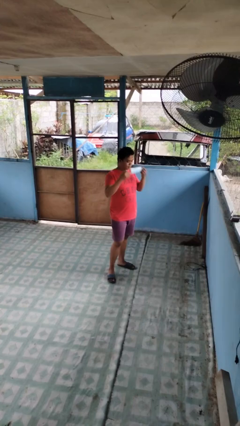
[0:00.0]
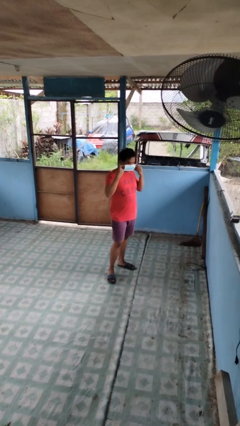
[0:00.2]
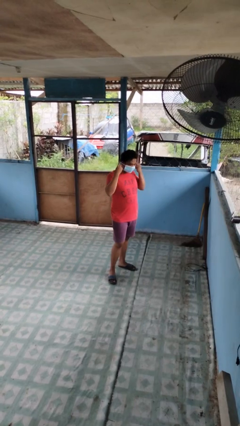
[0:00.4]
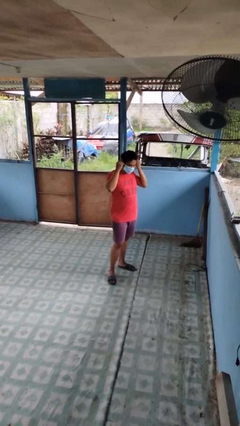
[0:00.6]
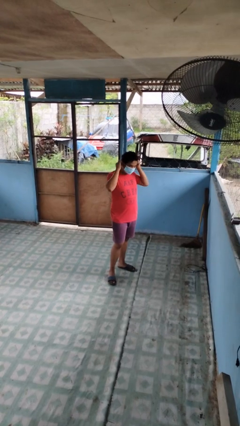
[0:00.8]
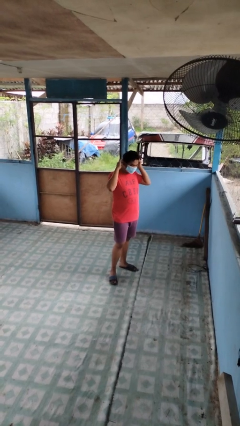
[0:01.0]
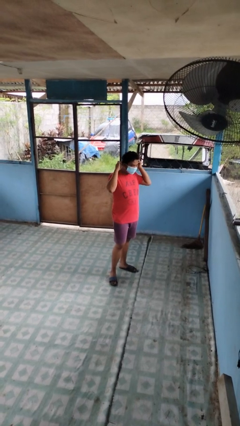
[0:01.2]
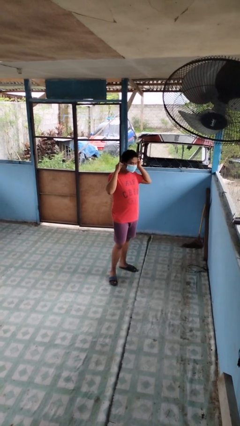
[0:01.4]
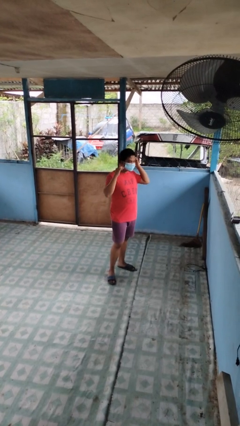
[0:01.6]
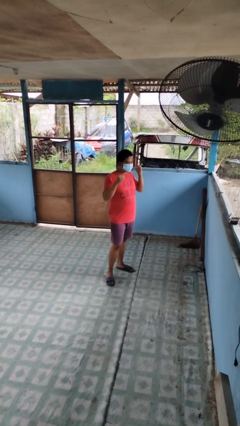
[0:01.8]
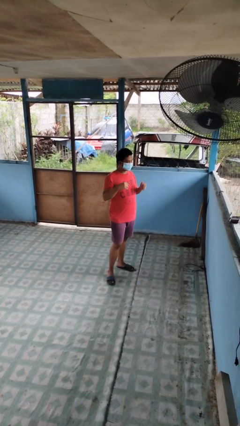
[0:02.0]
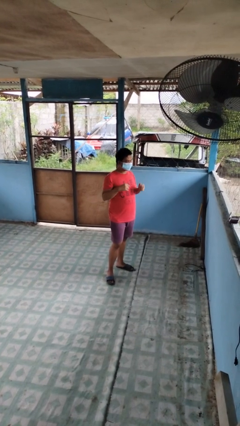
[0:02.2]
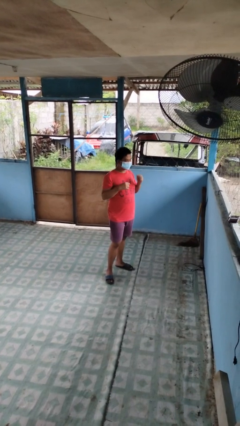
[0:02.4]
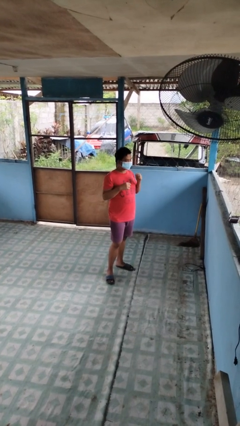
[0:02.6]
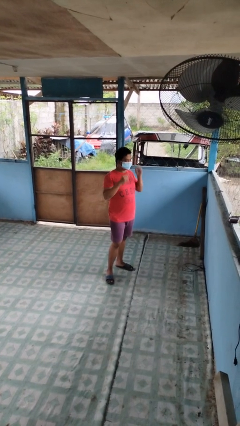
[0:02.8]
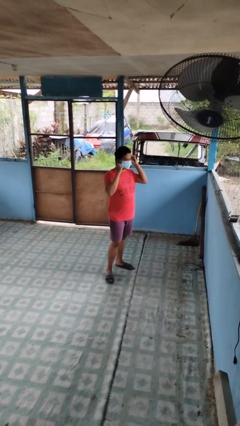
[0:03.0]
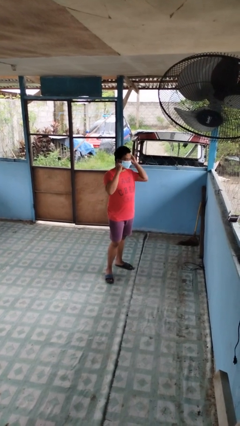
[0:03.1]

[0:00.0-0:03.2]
person puts on facemask

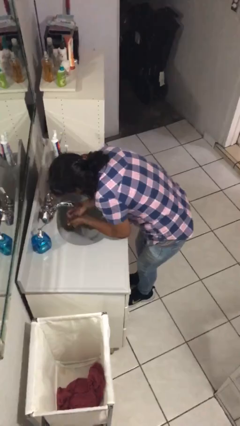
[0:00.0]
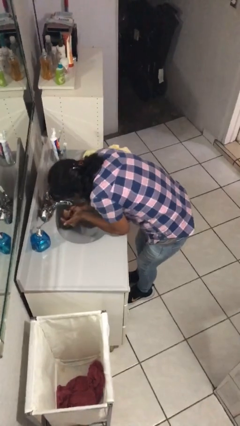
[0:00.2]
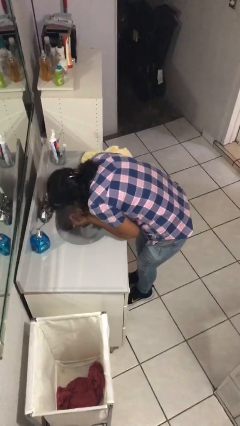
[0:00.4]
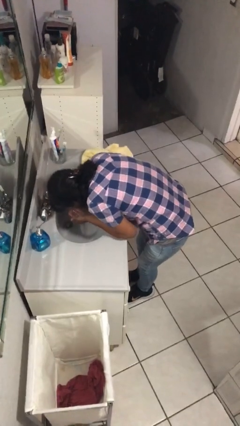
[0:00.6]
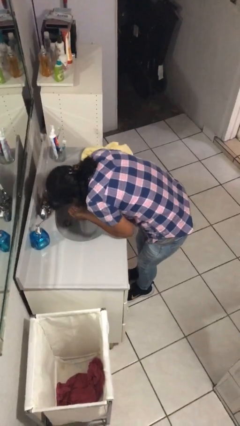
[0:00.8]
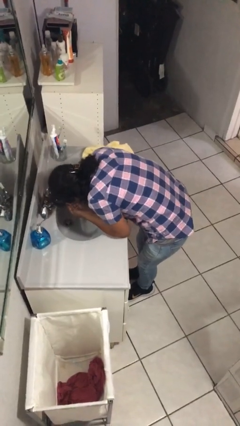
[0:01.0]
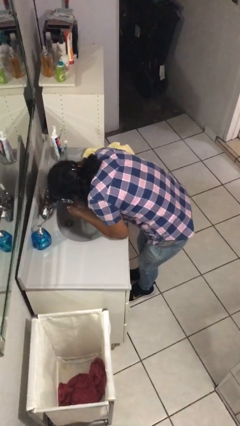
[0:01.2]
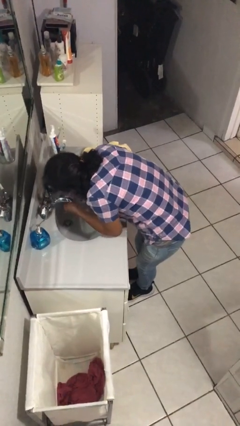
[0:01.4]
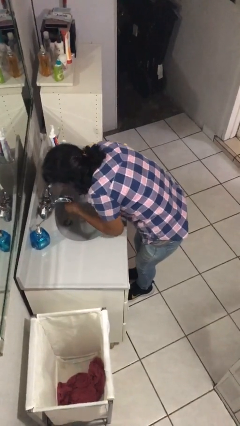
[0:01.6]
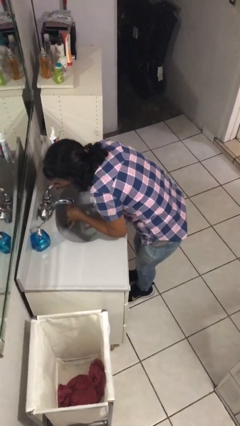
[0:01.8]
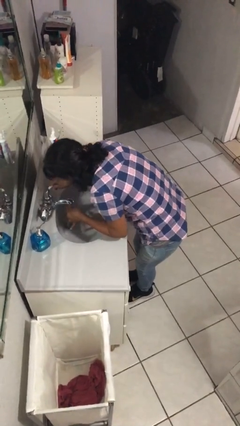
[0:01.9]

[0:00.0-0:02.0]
person washes face

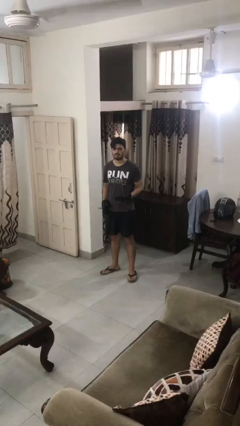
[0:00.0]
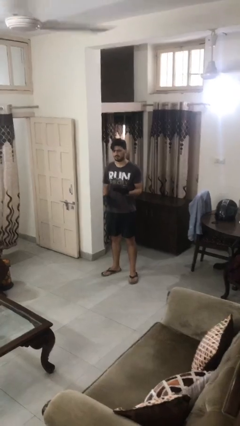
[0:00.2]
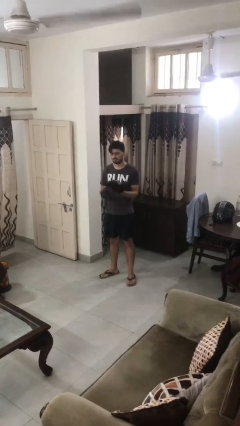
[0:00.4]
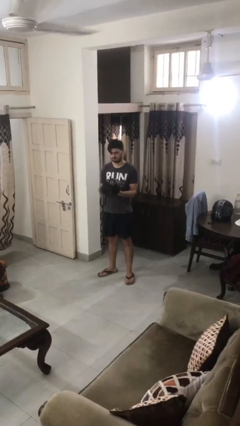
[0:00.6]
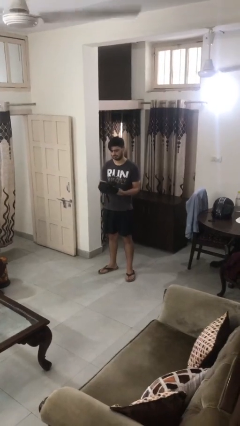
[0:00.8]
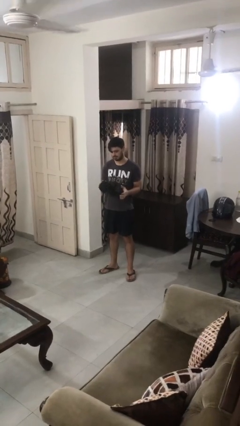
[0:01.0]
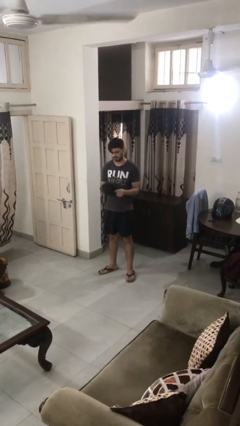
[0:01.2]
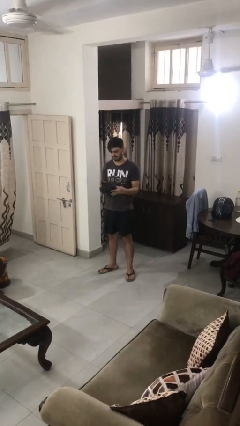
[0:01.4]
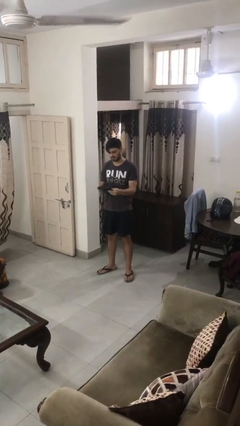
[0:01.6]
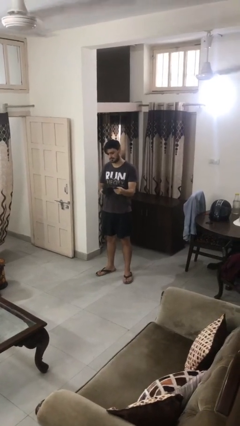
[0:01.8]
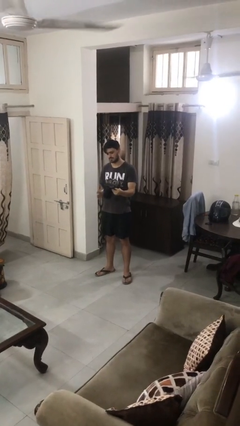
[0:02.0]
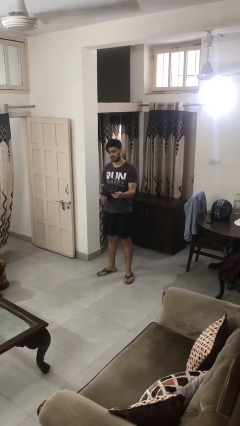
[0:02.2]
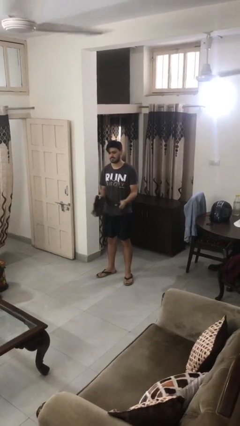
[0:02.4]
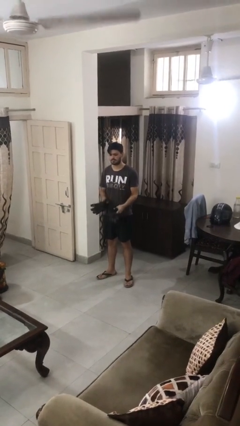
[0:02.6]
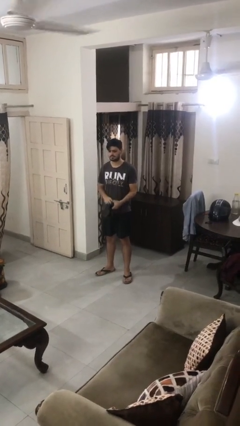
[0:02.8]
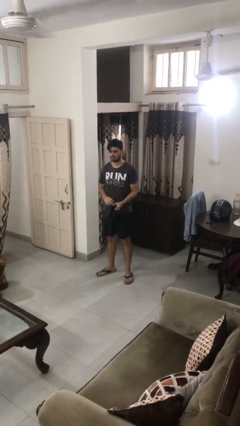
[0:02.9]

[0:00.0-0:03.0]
person takes off gloves

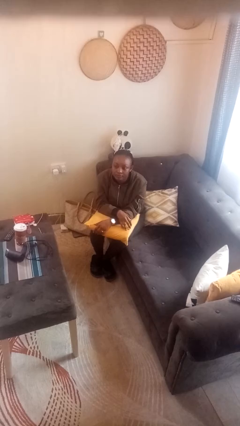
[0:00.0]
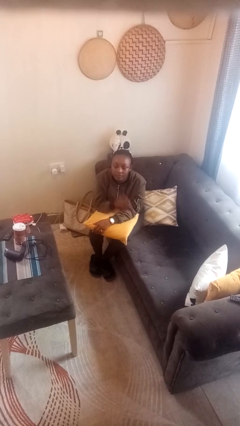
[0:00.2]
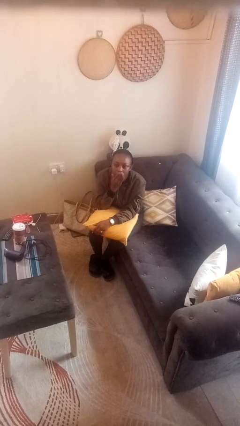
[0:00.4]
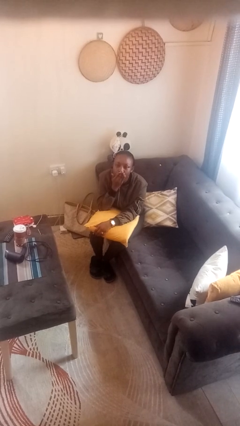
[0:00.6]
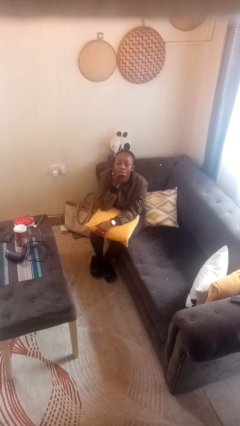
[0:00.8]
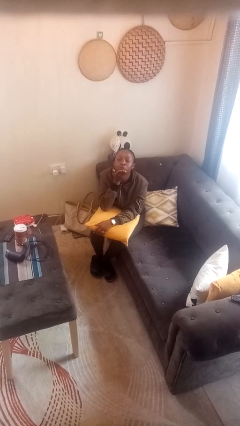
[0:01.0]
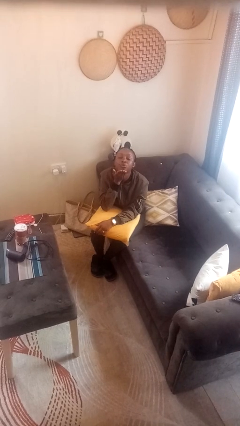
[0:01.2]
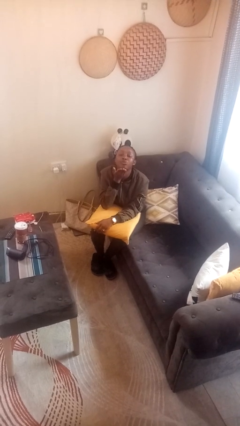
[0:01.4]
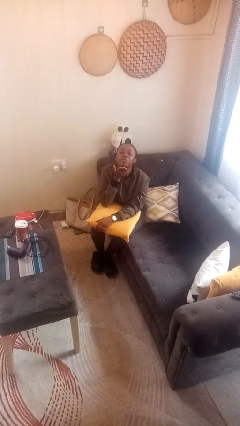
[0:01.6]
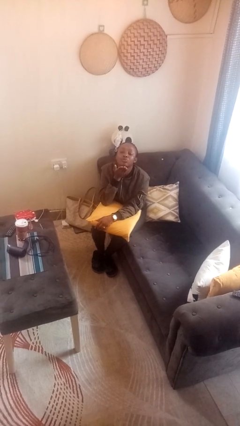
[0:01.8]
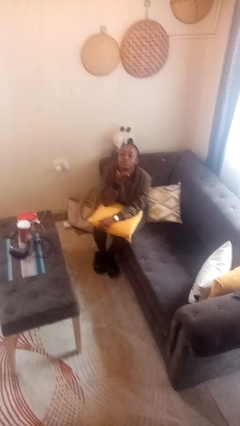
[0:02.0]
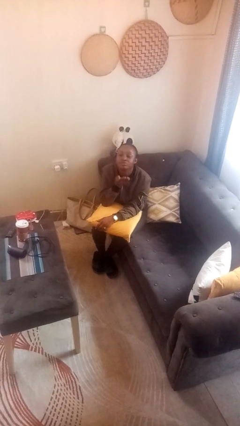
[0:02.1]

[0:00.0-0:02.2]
person gestures blow kiss

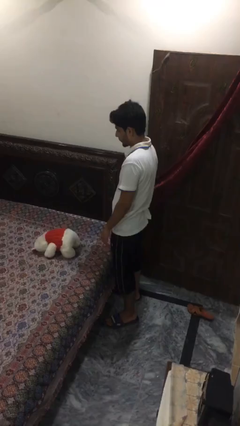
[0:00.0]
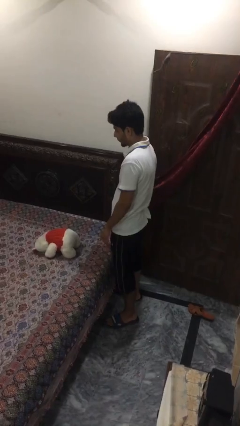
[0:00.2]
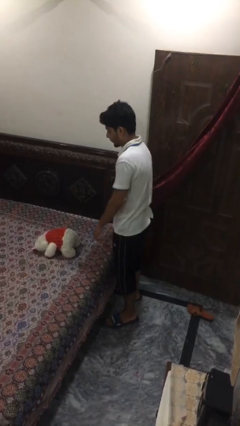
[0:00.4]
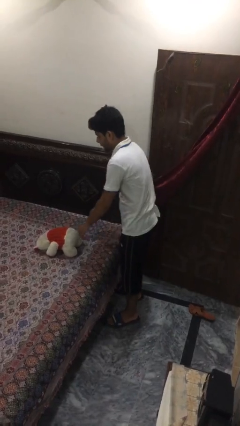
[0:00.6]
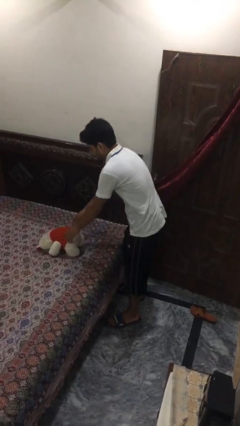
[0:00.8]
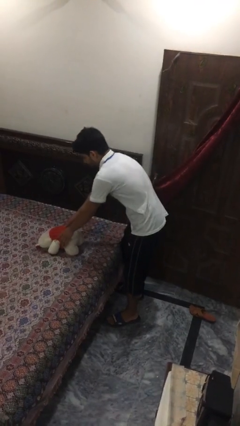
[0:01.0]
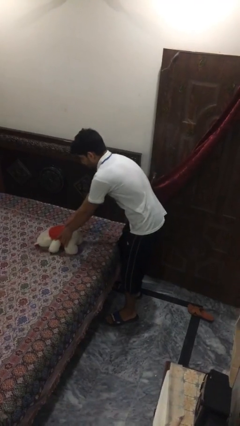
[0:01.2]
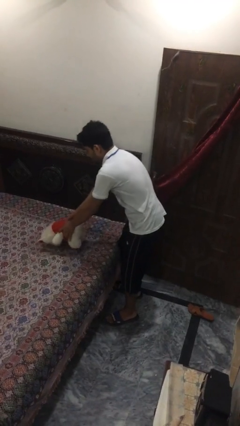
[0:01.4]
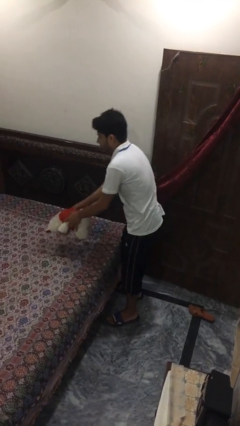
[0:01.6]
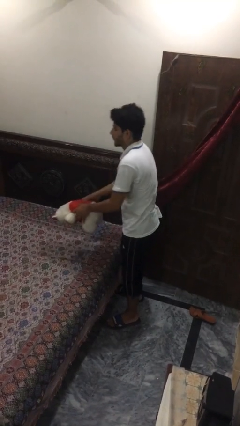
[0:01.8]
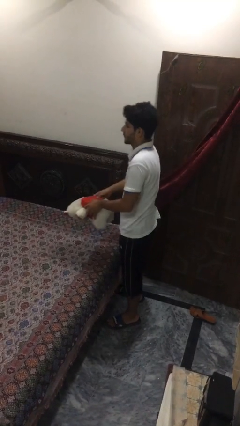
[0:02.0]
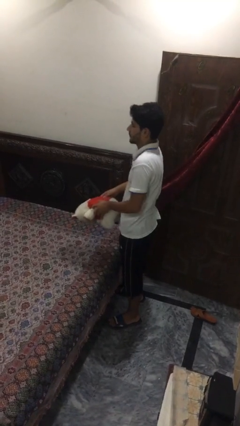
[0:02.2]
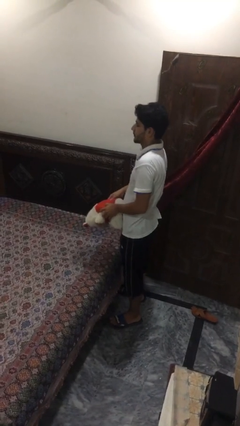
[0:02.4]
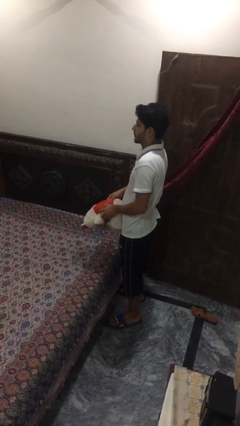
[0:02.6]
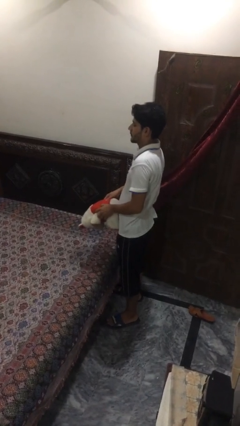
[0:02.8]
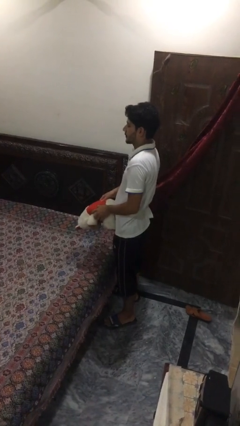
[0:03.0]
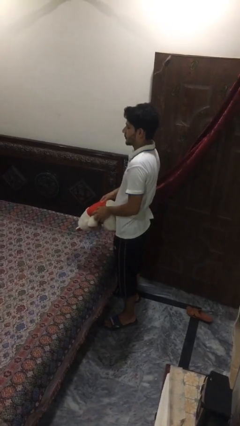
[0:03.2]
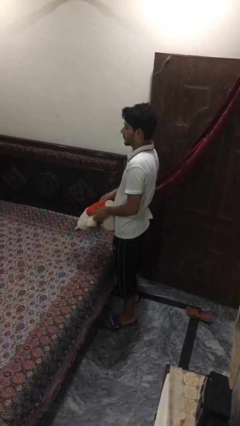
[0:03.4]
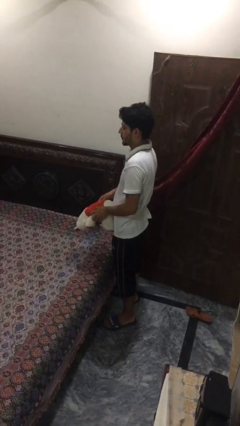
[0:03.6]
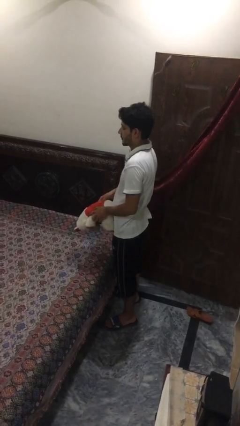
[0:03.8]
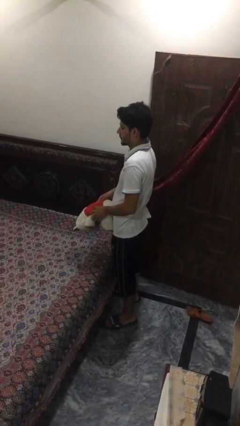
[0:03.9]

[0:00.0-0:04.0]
person picks up object from bed

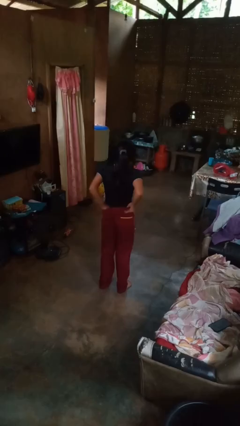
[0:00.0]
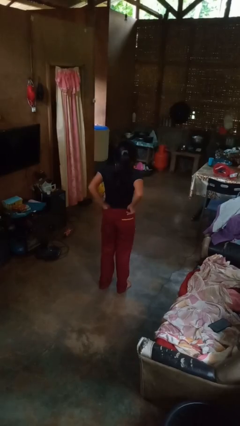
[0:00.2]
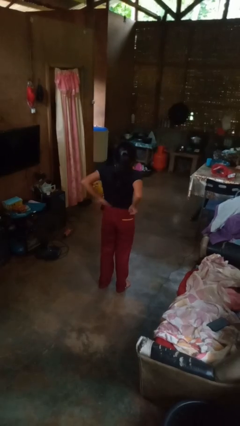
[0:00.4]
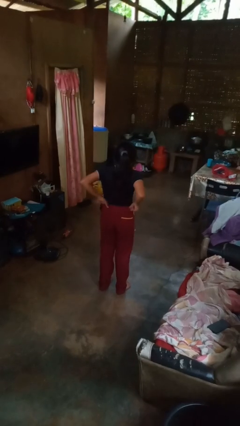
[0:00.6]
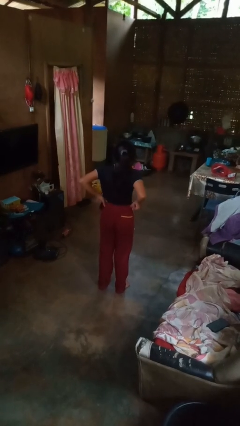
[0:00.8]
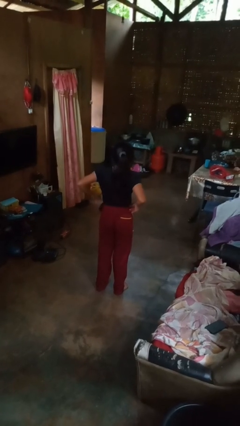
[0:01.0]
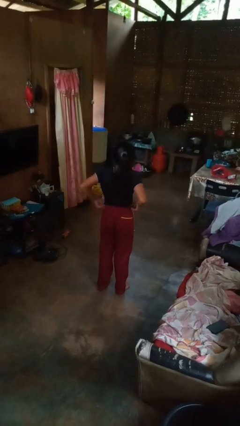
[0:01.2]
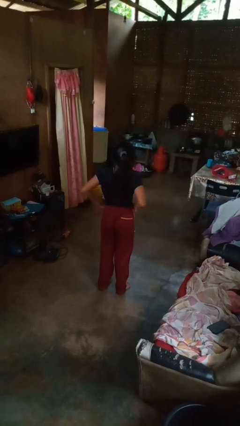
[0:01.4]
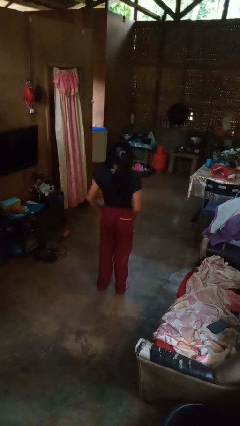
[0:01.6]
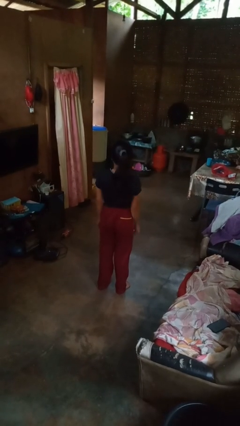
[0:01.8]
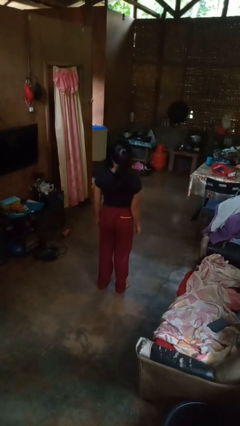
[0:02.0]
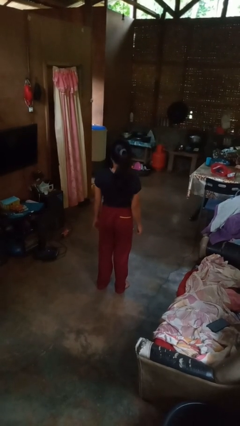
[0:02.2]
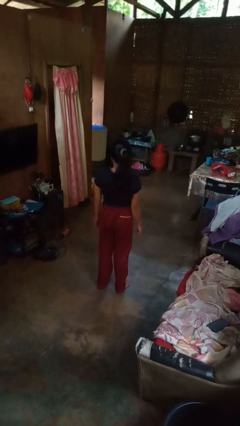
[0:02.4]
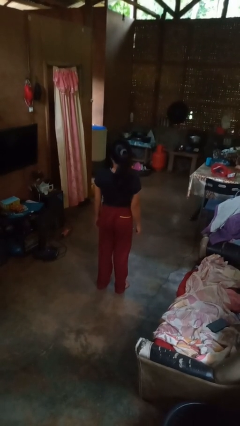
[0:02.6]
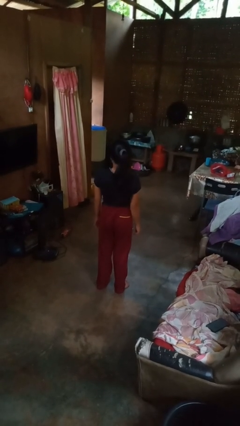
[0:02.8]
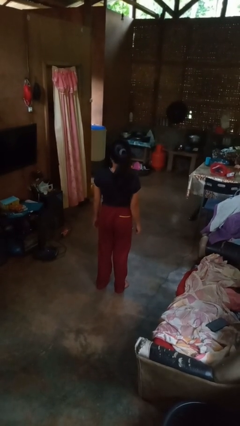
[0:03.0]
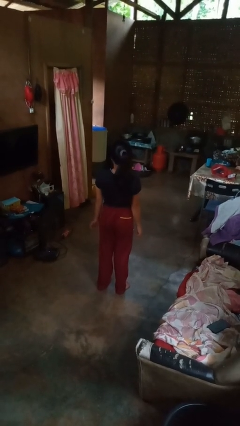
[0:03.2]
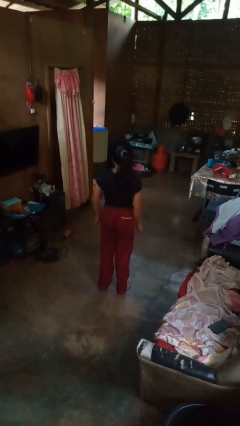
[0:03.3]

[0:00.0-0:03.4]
person tucks in shirt
